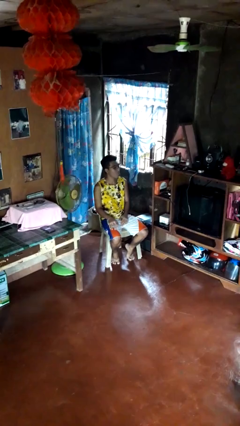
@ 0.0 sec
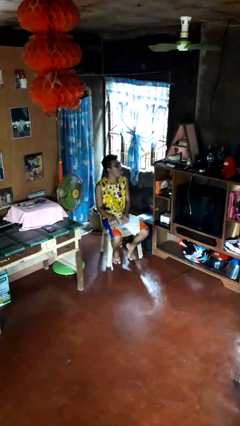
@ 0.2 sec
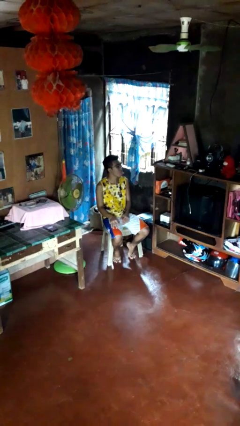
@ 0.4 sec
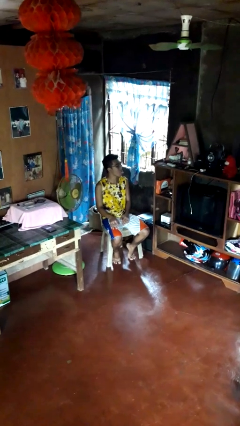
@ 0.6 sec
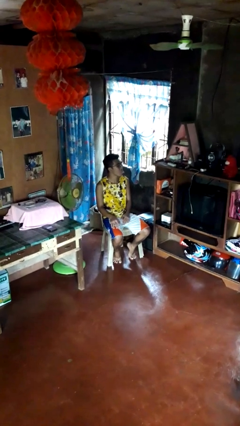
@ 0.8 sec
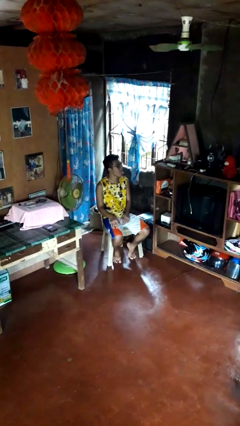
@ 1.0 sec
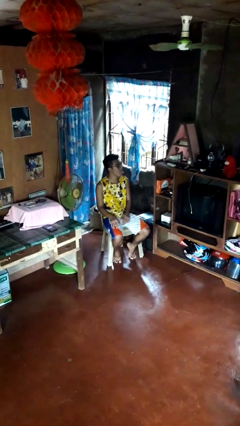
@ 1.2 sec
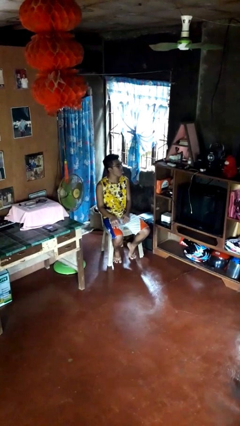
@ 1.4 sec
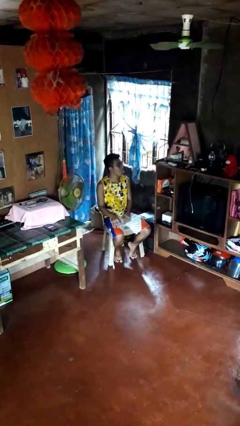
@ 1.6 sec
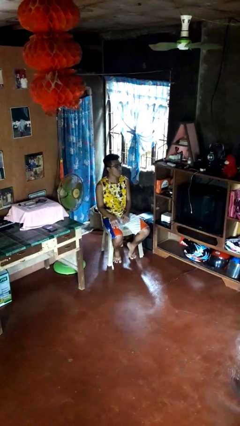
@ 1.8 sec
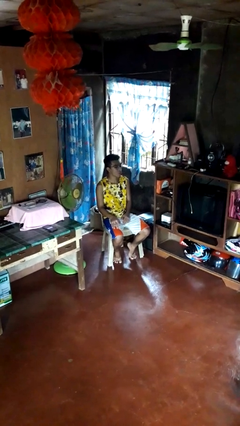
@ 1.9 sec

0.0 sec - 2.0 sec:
person sticks out tongue

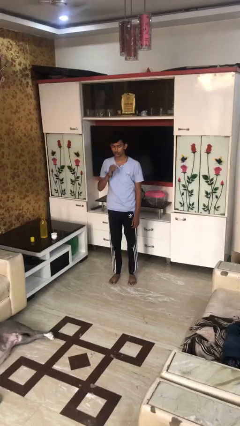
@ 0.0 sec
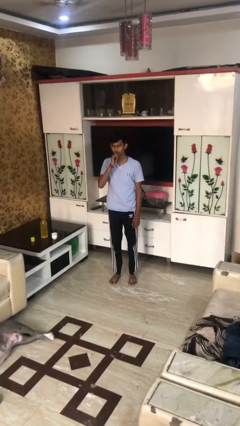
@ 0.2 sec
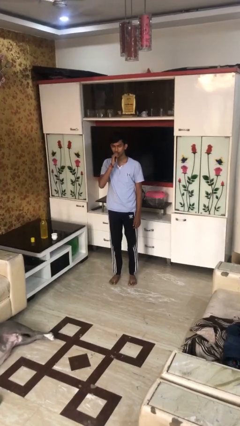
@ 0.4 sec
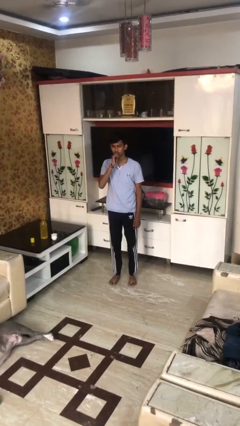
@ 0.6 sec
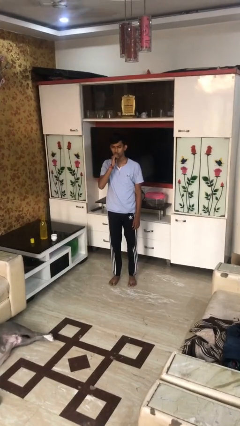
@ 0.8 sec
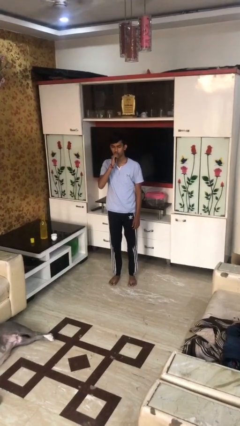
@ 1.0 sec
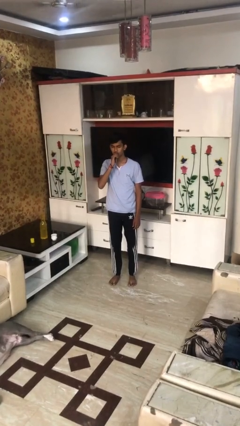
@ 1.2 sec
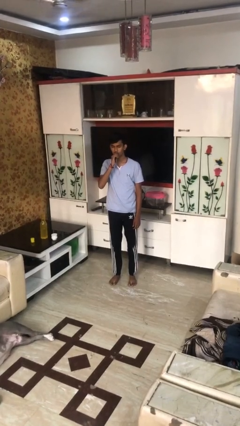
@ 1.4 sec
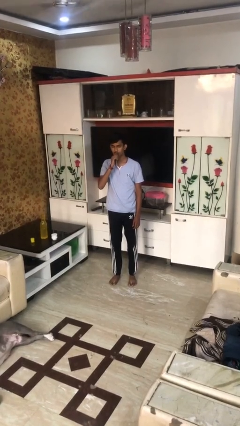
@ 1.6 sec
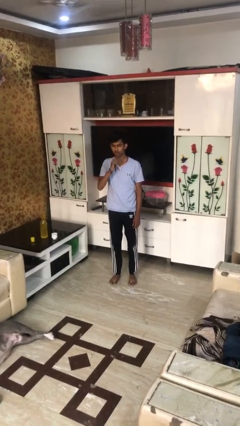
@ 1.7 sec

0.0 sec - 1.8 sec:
person vapes

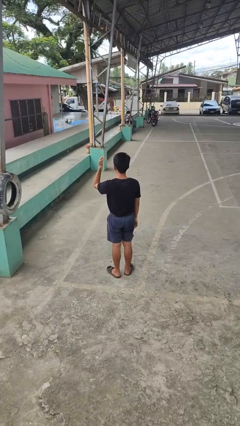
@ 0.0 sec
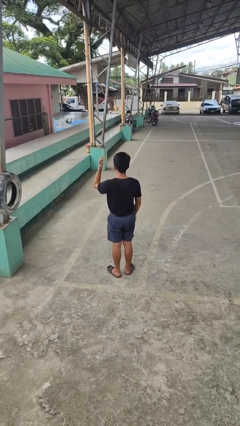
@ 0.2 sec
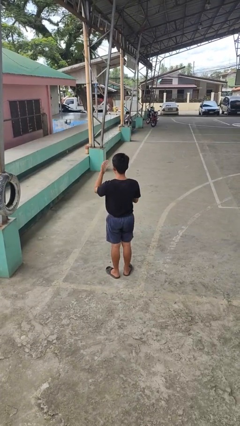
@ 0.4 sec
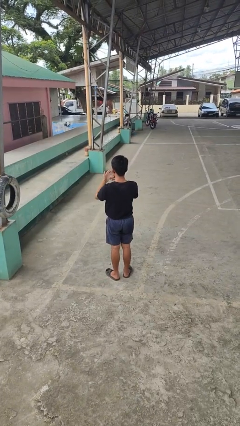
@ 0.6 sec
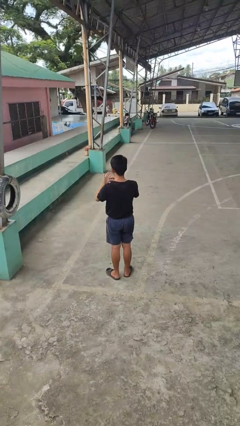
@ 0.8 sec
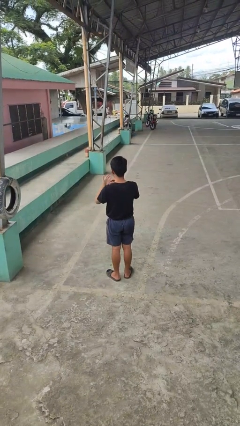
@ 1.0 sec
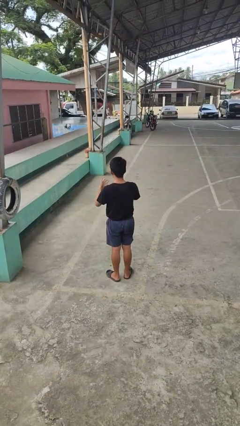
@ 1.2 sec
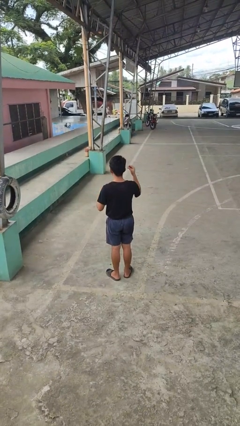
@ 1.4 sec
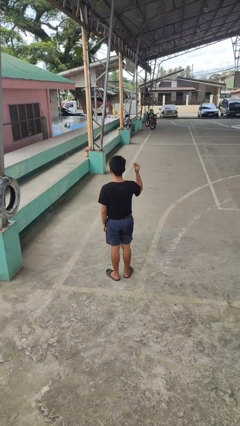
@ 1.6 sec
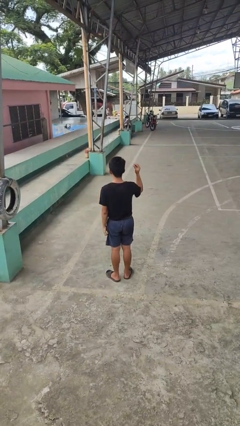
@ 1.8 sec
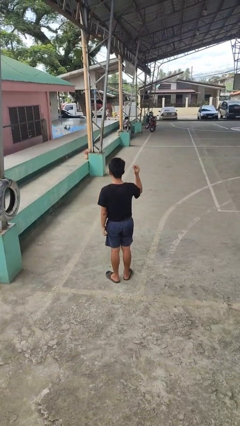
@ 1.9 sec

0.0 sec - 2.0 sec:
person takes off ring

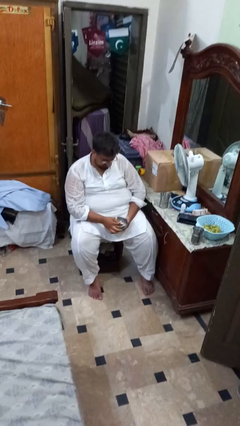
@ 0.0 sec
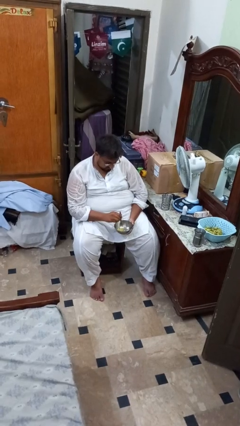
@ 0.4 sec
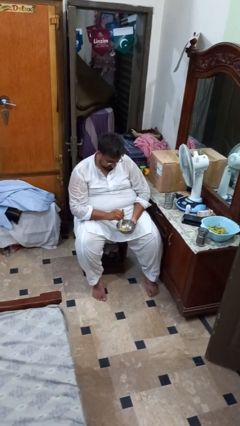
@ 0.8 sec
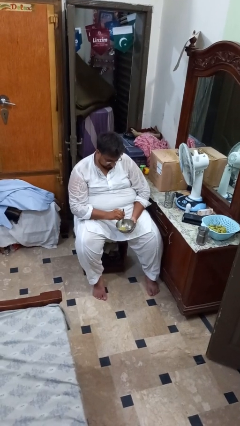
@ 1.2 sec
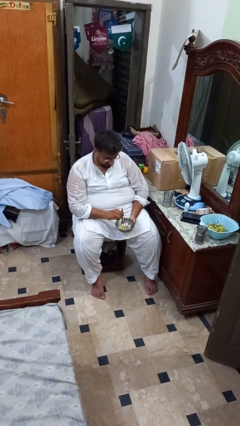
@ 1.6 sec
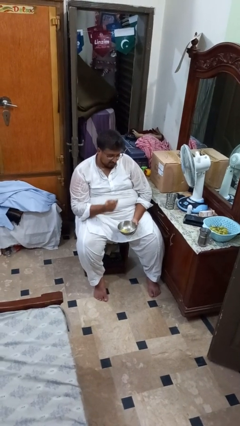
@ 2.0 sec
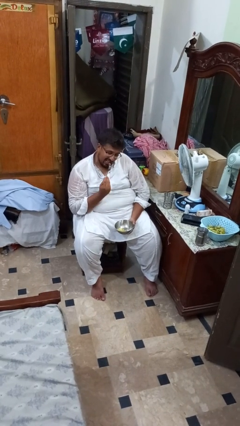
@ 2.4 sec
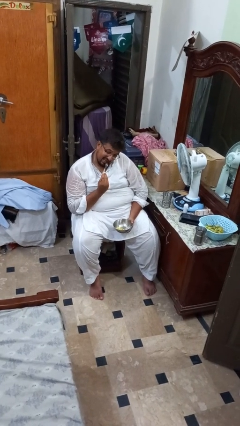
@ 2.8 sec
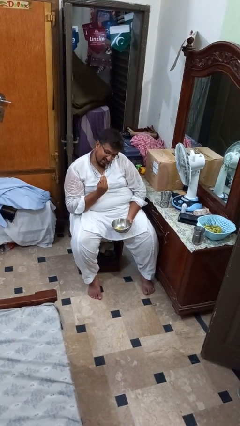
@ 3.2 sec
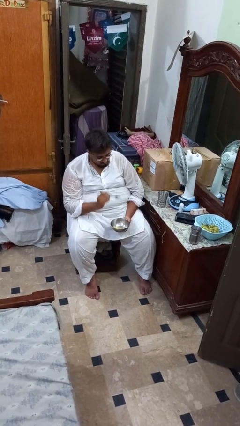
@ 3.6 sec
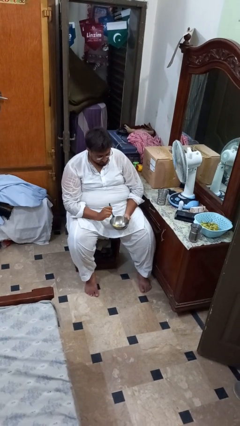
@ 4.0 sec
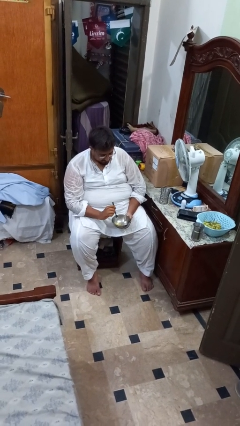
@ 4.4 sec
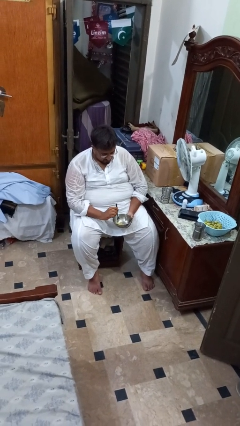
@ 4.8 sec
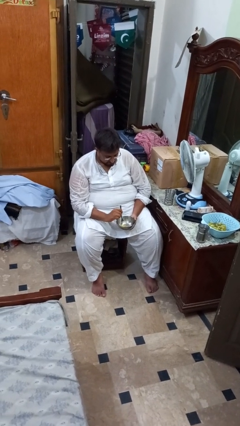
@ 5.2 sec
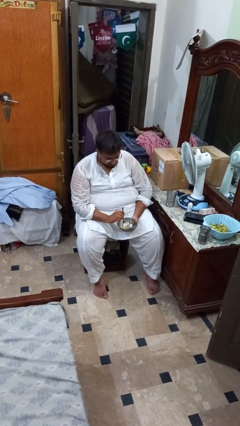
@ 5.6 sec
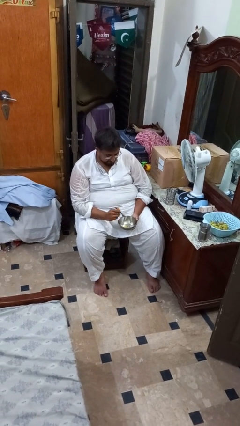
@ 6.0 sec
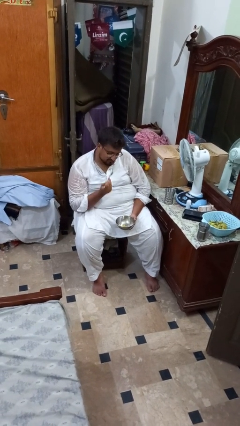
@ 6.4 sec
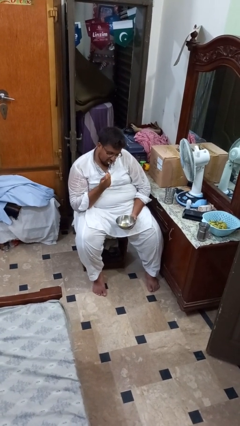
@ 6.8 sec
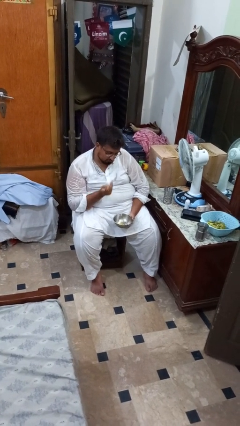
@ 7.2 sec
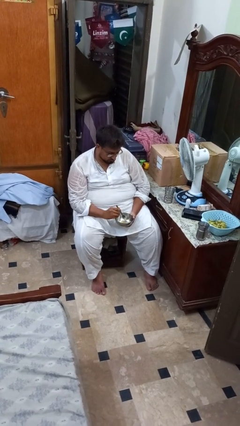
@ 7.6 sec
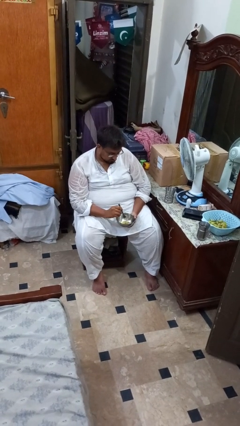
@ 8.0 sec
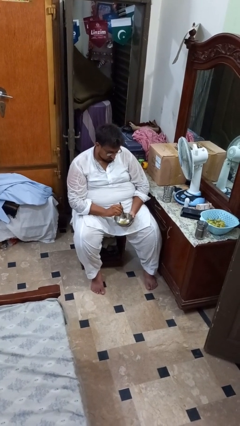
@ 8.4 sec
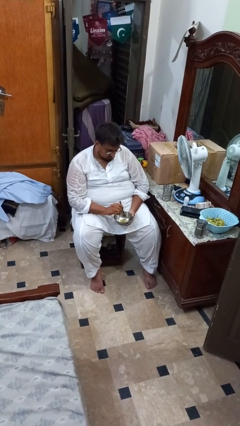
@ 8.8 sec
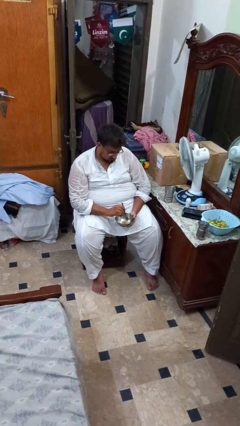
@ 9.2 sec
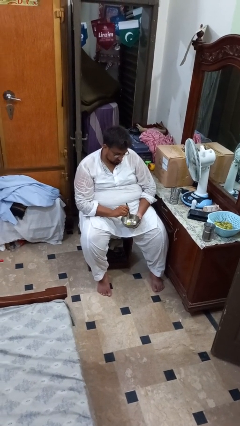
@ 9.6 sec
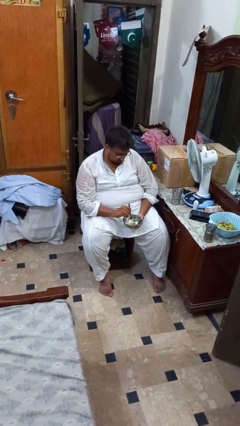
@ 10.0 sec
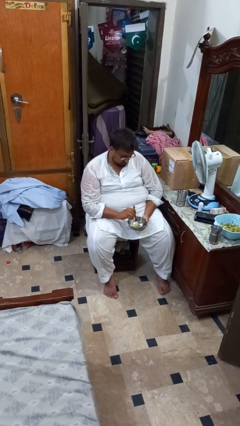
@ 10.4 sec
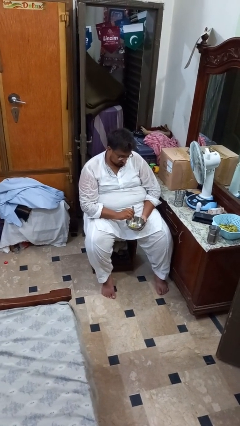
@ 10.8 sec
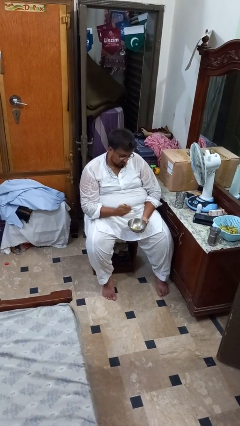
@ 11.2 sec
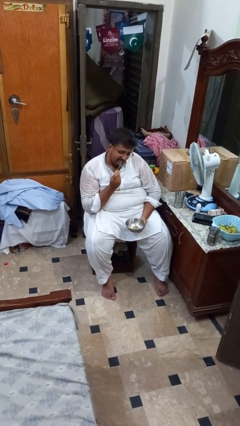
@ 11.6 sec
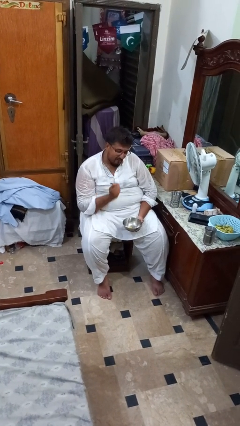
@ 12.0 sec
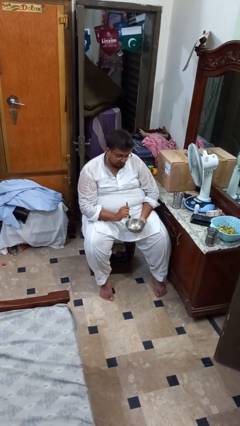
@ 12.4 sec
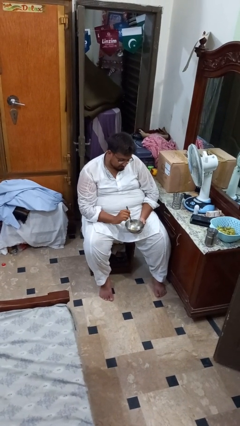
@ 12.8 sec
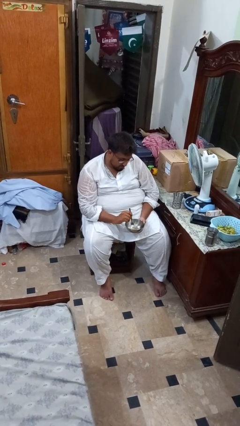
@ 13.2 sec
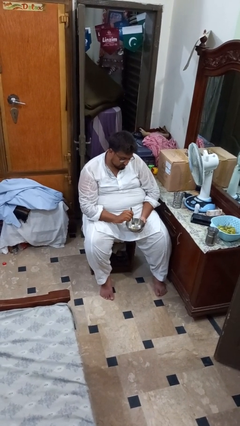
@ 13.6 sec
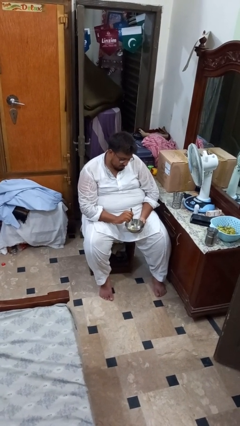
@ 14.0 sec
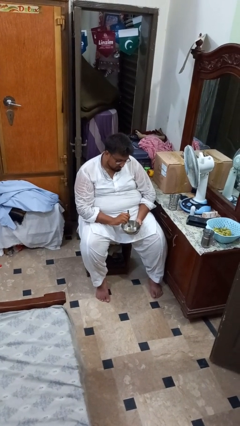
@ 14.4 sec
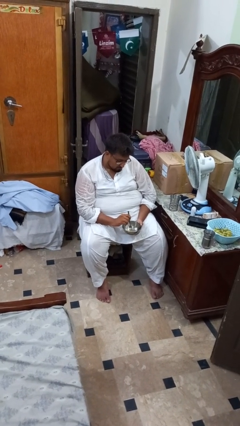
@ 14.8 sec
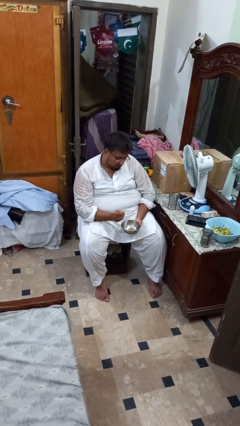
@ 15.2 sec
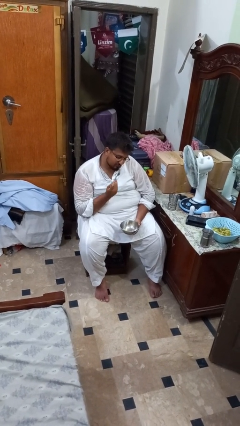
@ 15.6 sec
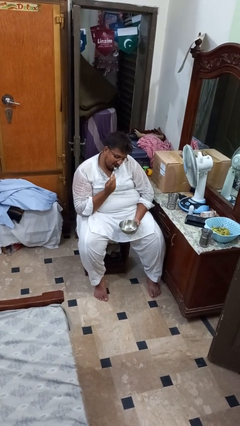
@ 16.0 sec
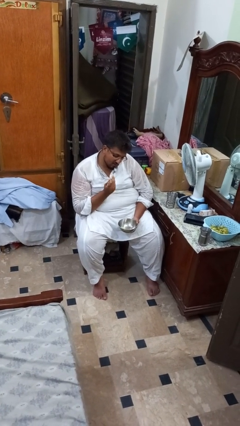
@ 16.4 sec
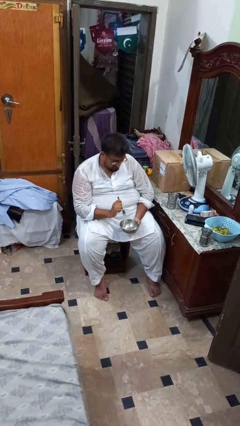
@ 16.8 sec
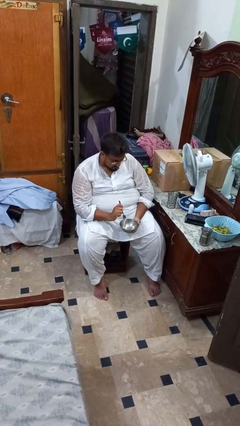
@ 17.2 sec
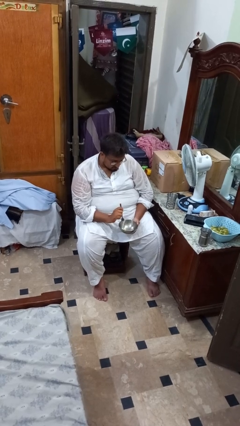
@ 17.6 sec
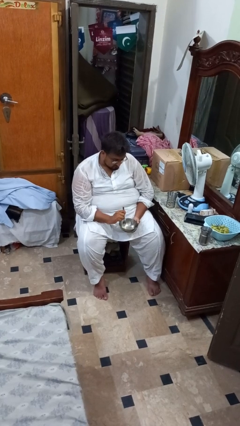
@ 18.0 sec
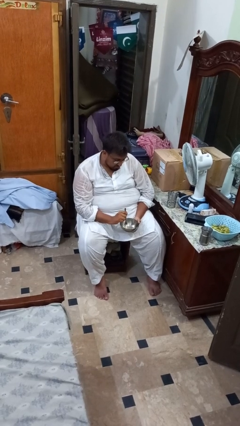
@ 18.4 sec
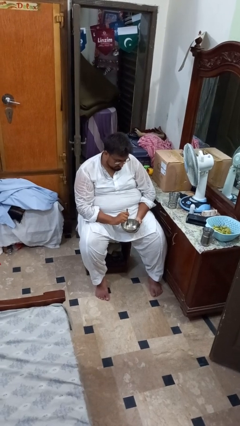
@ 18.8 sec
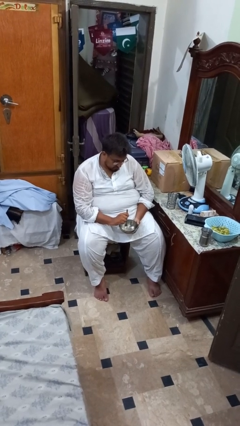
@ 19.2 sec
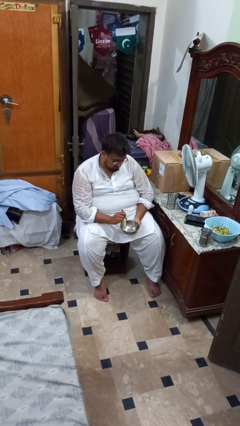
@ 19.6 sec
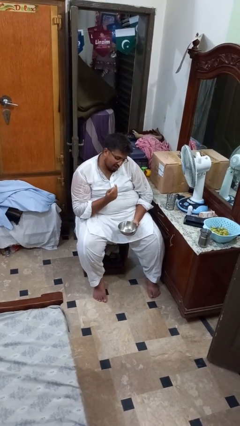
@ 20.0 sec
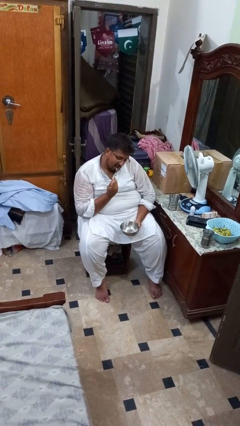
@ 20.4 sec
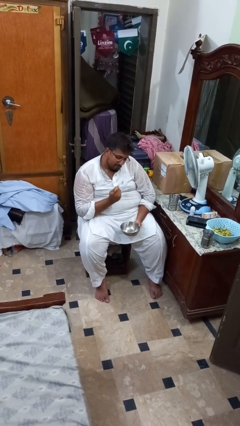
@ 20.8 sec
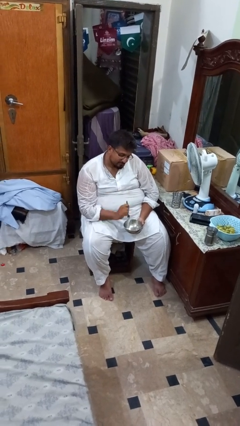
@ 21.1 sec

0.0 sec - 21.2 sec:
person eats with utensil

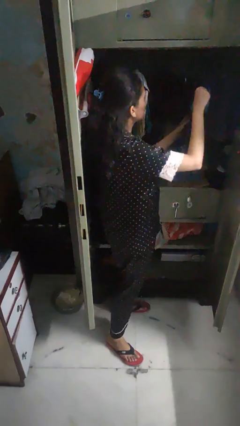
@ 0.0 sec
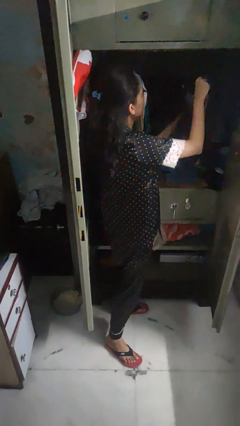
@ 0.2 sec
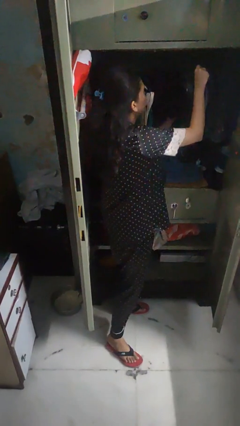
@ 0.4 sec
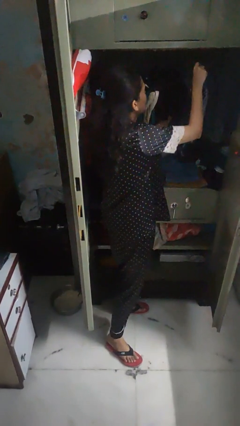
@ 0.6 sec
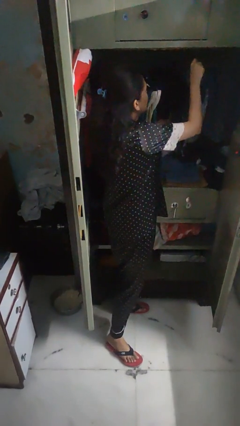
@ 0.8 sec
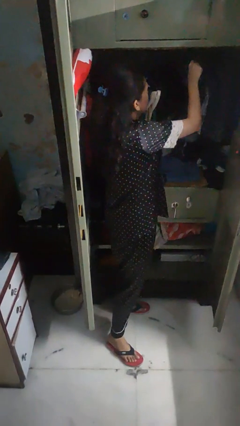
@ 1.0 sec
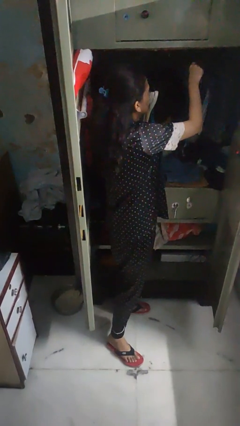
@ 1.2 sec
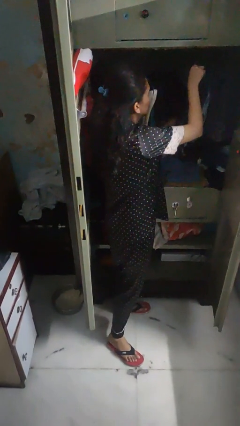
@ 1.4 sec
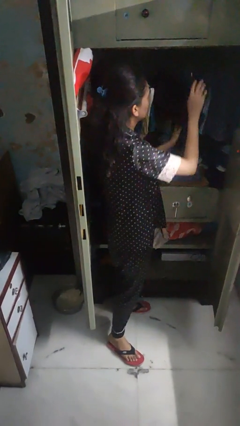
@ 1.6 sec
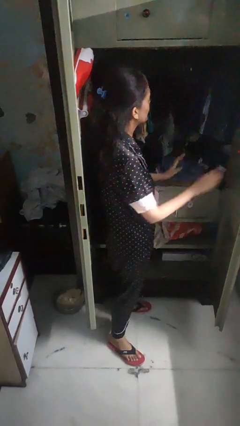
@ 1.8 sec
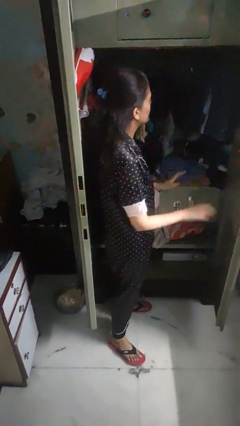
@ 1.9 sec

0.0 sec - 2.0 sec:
person puts clothes into closet
